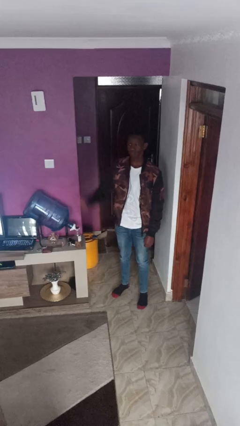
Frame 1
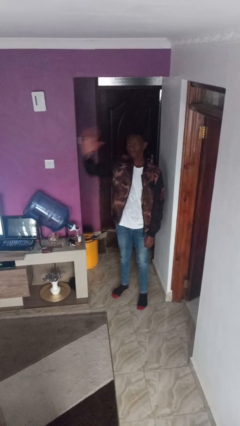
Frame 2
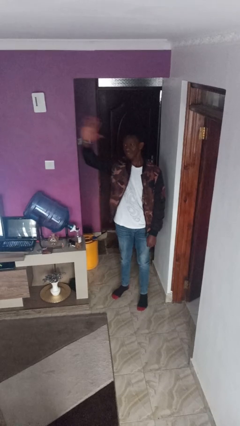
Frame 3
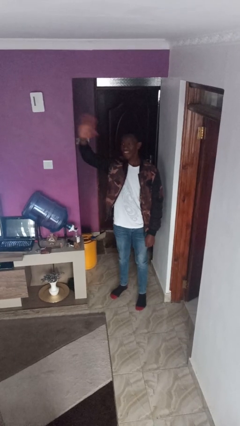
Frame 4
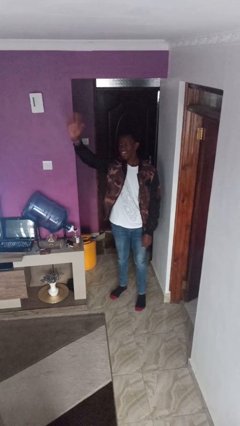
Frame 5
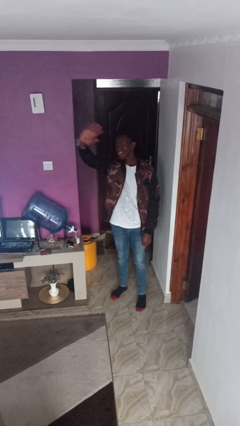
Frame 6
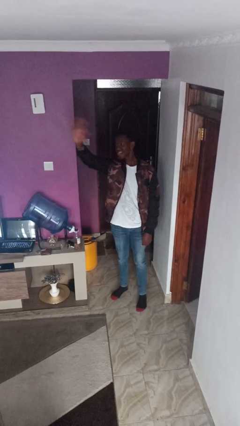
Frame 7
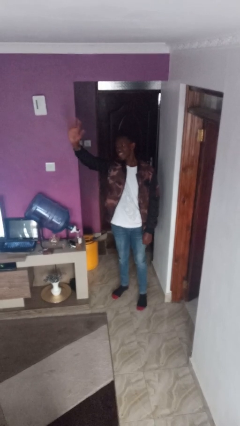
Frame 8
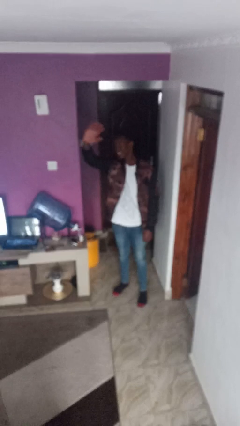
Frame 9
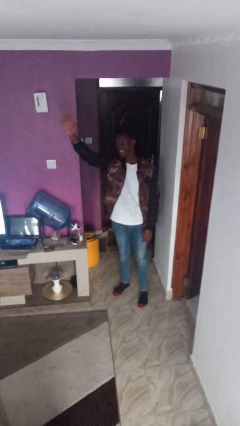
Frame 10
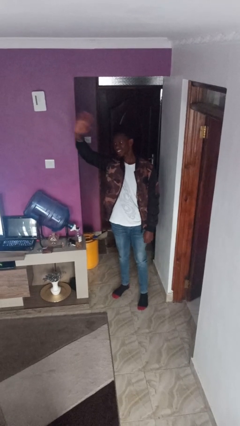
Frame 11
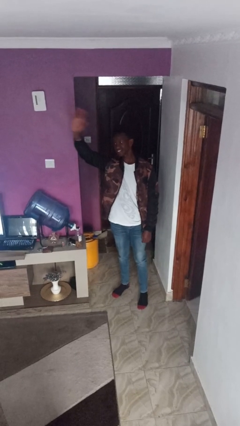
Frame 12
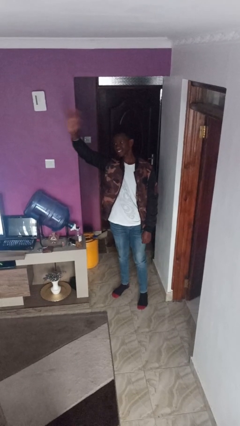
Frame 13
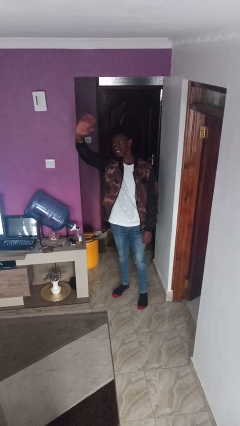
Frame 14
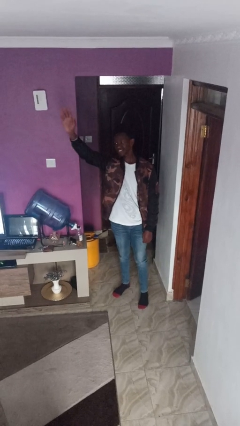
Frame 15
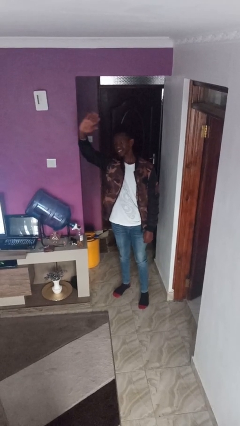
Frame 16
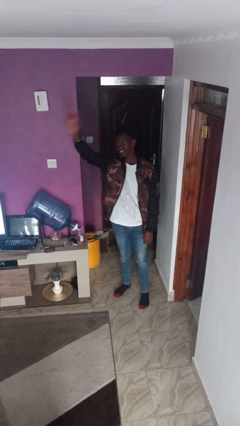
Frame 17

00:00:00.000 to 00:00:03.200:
person waves at person

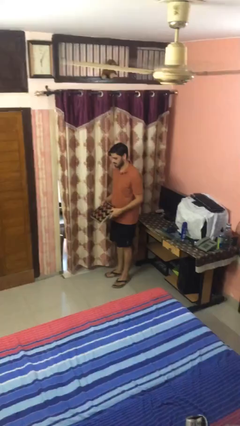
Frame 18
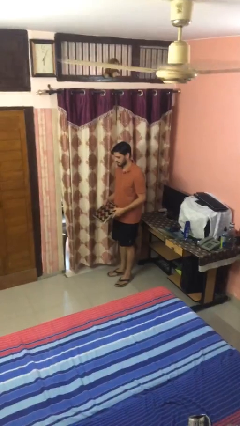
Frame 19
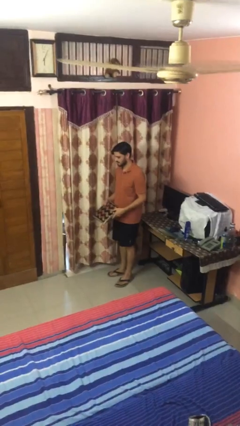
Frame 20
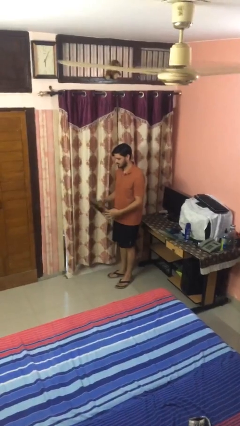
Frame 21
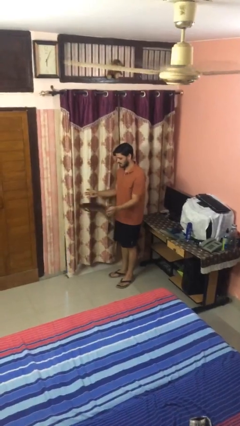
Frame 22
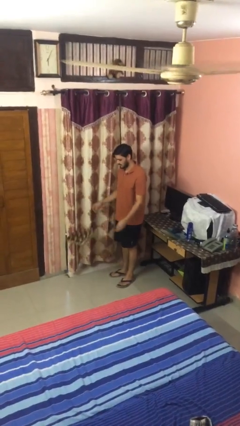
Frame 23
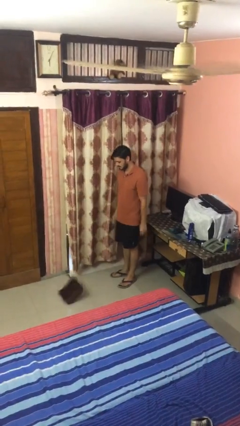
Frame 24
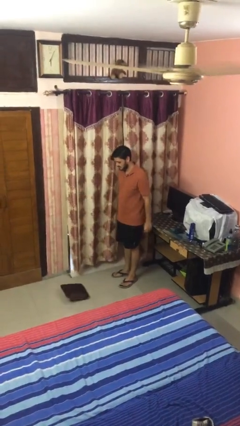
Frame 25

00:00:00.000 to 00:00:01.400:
person throws object to ground

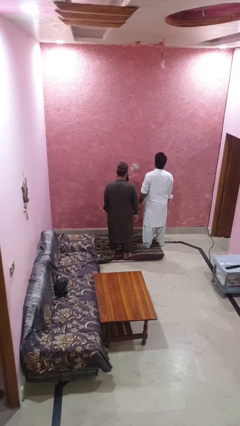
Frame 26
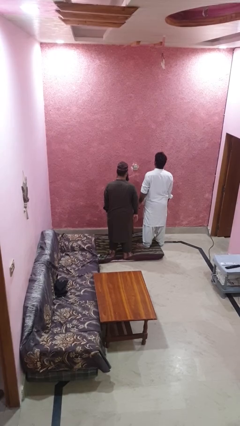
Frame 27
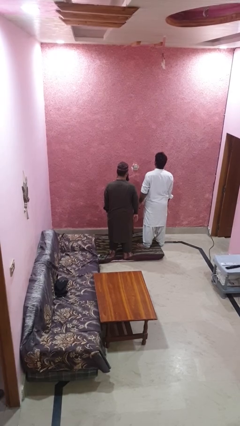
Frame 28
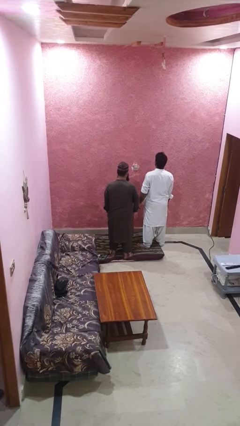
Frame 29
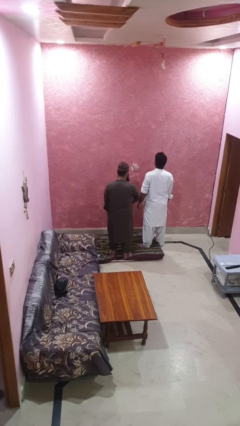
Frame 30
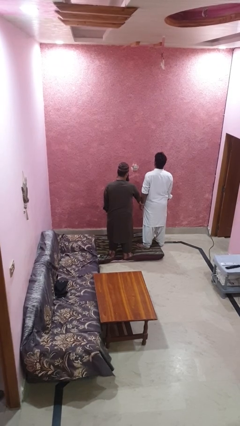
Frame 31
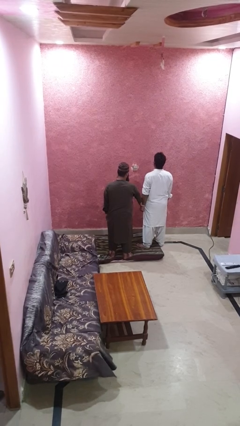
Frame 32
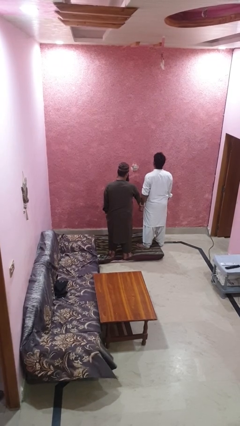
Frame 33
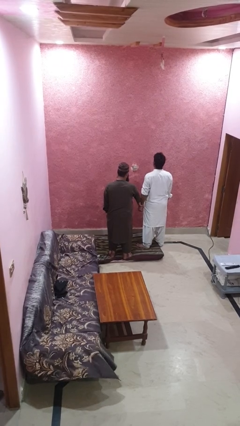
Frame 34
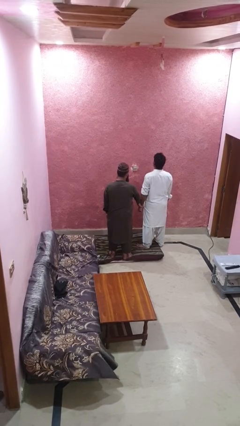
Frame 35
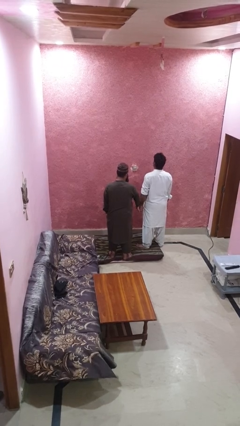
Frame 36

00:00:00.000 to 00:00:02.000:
person grabs person by forearm

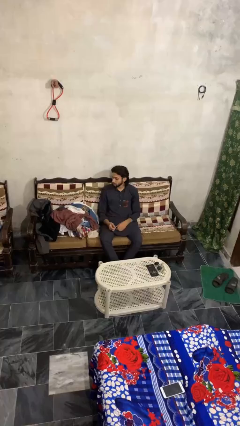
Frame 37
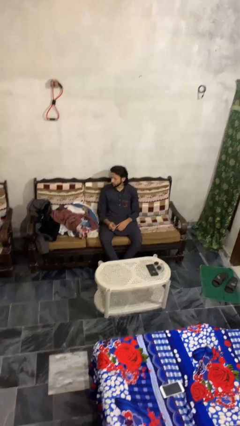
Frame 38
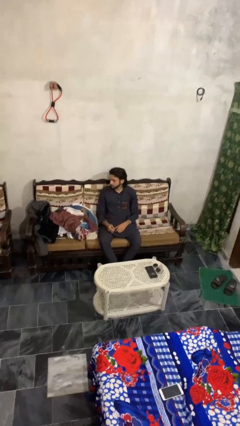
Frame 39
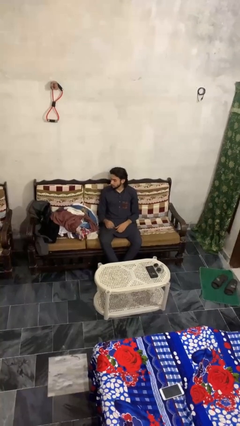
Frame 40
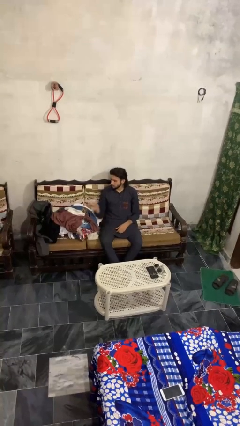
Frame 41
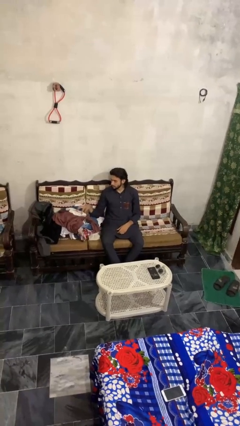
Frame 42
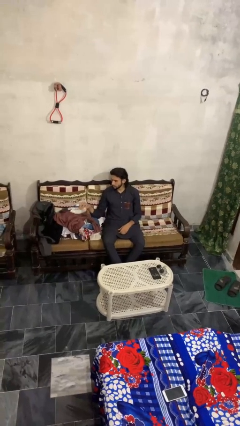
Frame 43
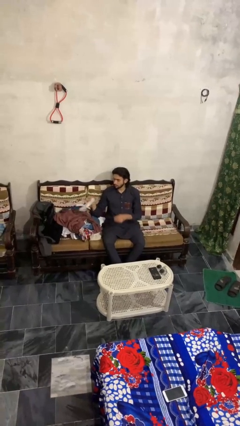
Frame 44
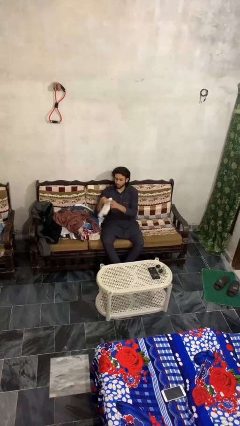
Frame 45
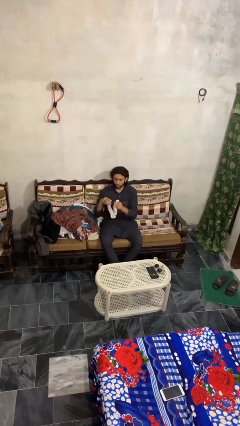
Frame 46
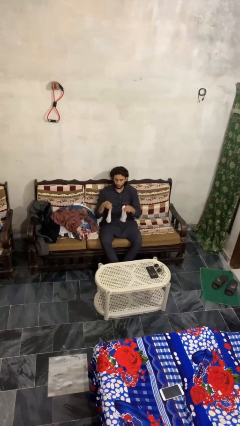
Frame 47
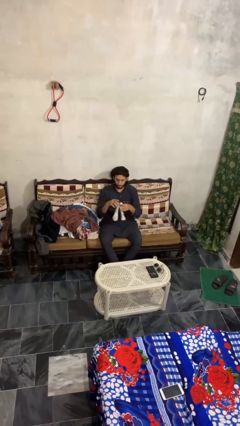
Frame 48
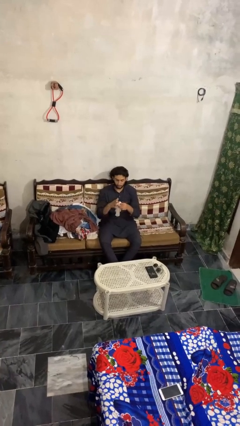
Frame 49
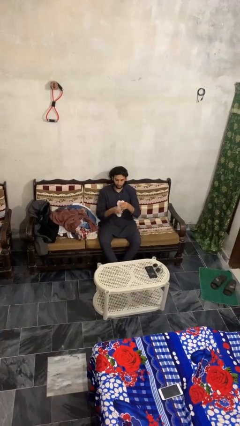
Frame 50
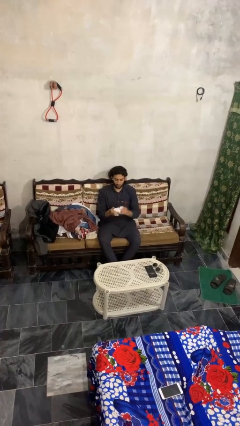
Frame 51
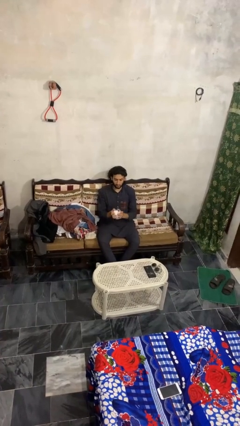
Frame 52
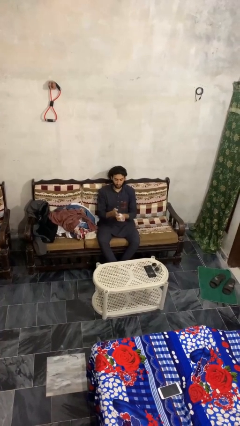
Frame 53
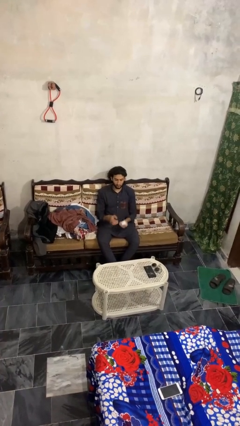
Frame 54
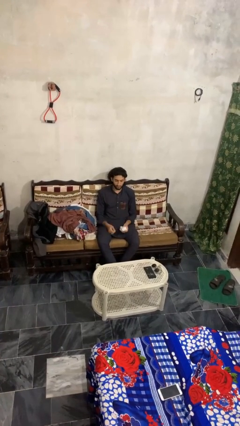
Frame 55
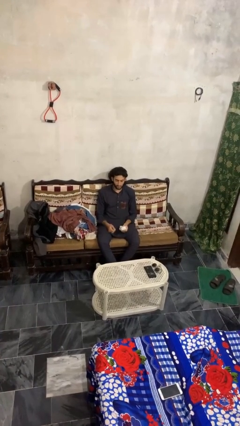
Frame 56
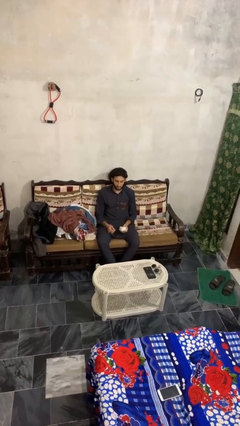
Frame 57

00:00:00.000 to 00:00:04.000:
person folds socks

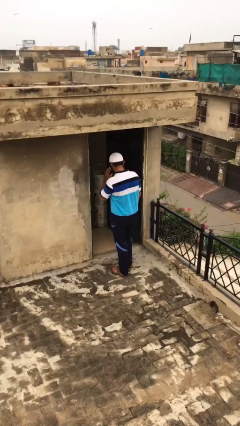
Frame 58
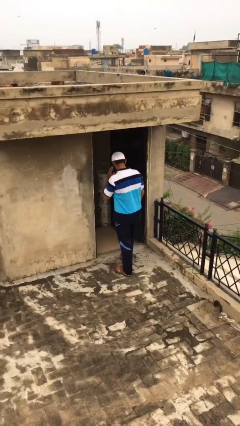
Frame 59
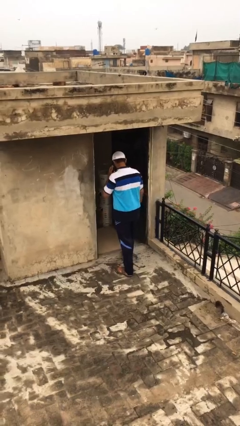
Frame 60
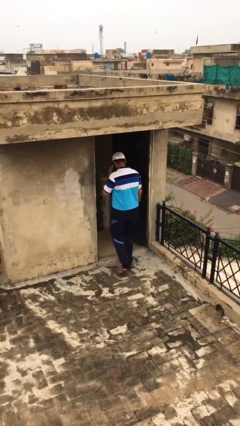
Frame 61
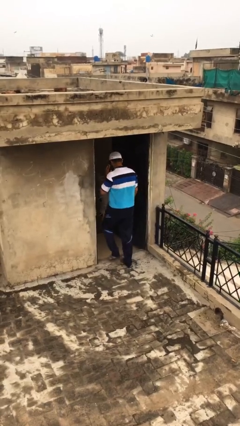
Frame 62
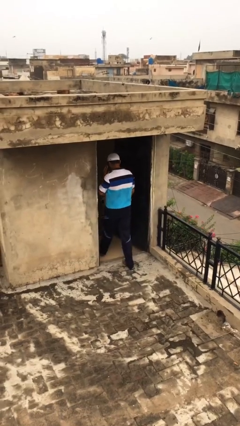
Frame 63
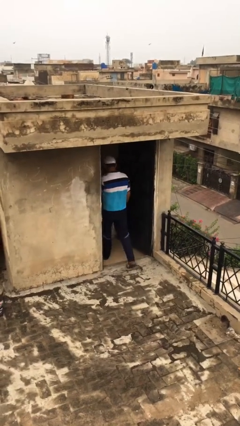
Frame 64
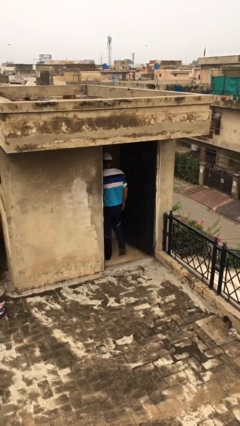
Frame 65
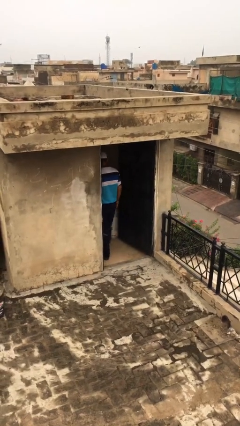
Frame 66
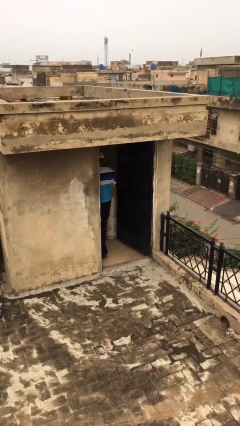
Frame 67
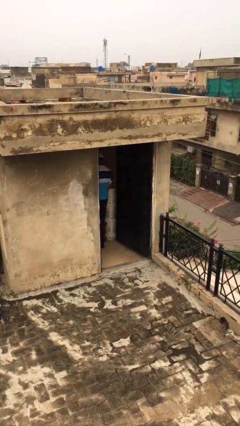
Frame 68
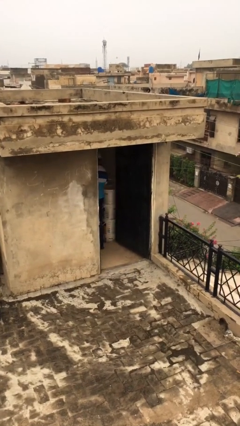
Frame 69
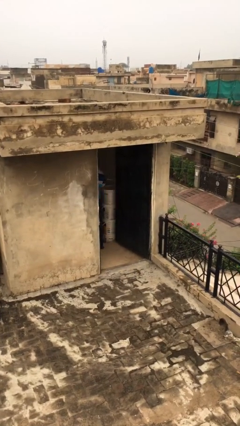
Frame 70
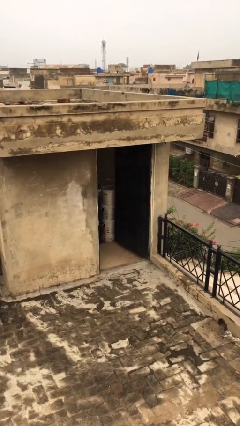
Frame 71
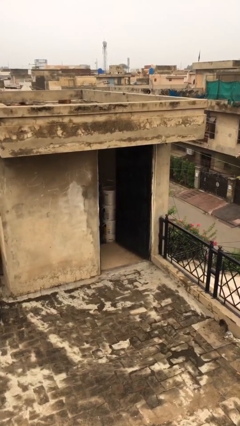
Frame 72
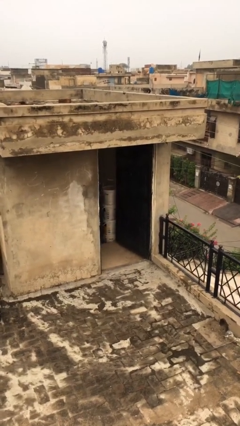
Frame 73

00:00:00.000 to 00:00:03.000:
person exits scene through structure

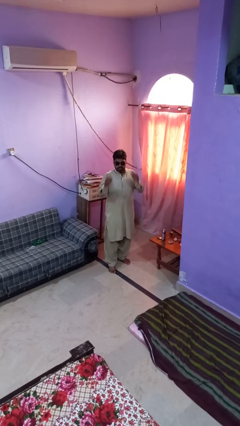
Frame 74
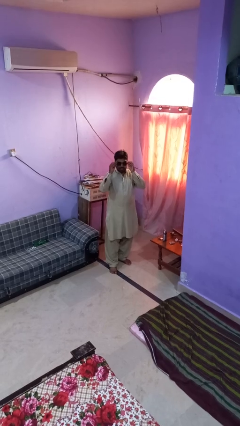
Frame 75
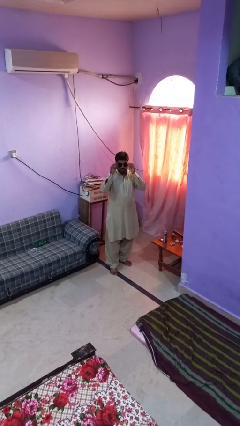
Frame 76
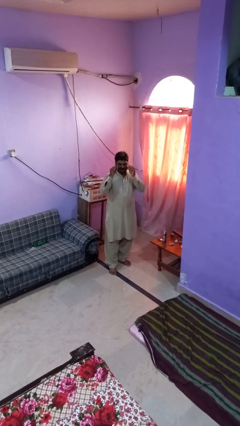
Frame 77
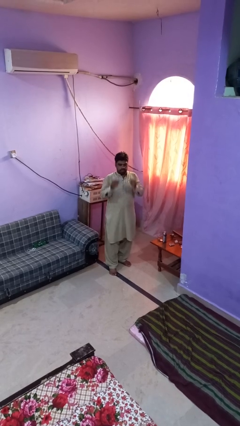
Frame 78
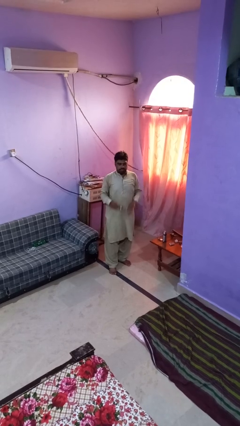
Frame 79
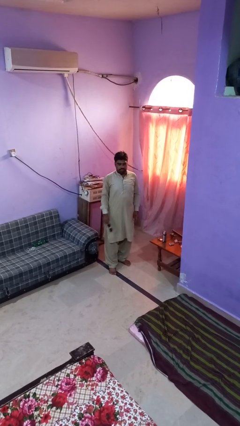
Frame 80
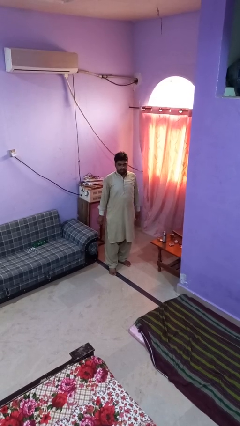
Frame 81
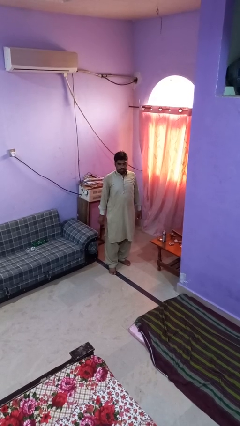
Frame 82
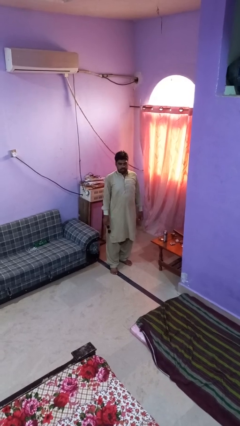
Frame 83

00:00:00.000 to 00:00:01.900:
person takes off sunglasses

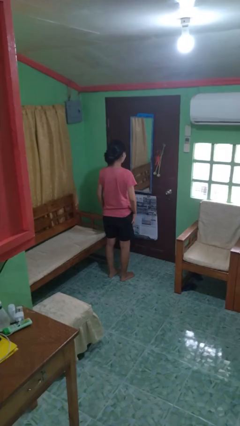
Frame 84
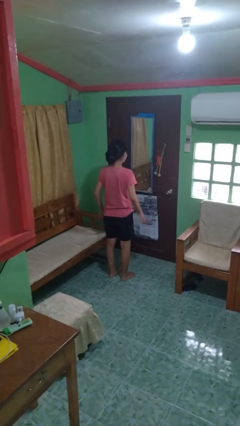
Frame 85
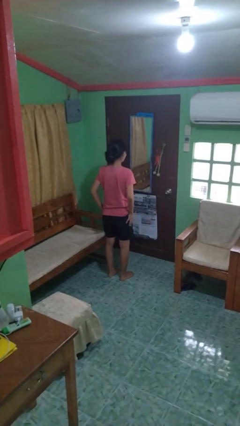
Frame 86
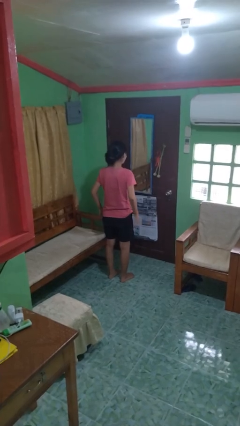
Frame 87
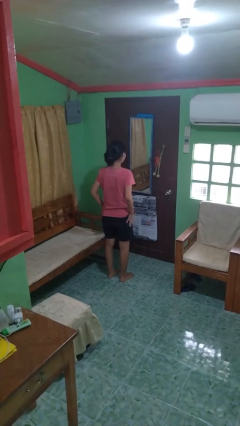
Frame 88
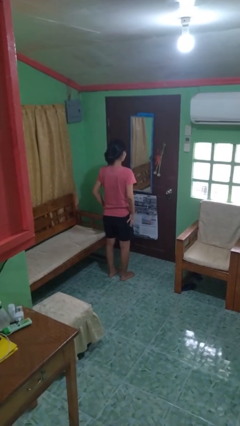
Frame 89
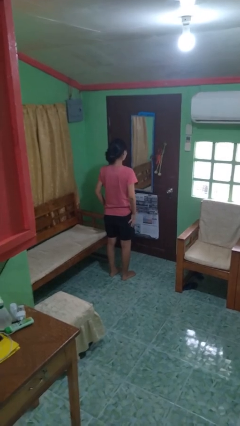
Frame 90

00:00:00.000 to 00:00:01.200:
person slaps hands on thighs

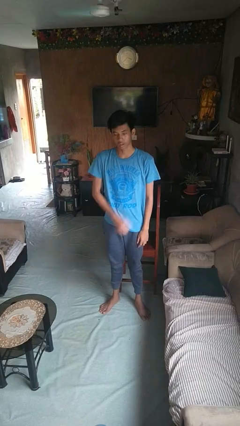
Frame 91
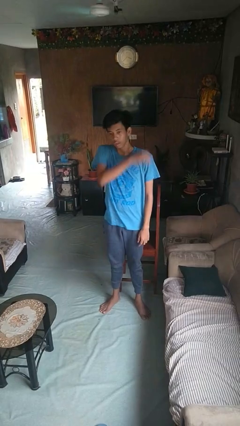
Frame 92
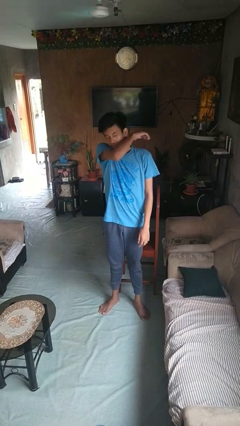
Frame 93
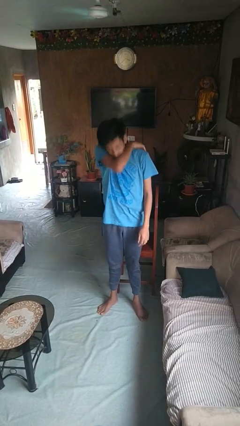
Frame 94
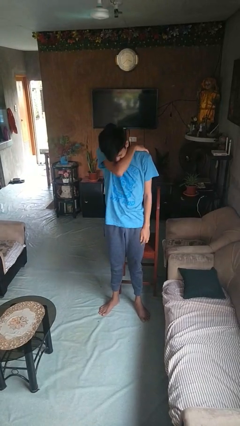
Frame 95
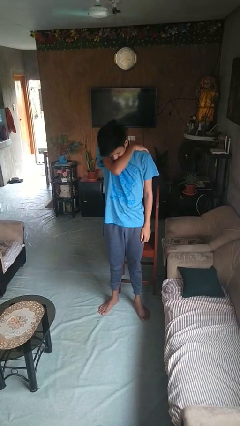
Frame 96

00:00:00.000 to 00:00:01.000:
person sneezes into arm
